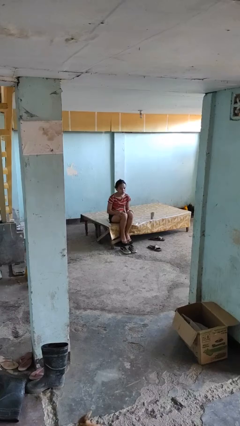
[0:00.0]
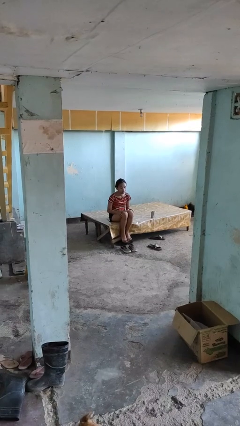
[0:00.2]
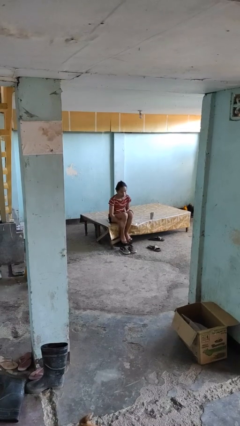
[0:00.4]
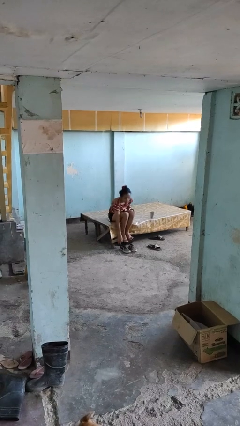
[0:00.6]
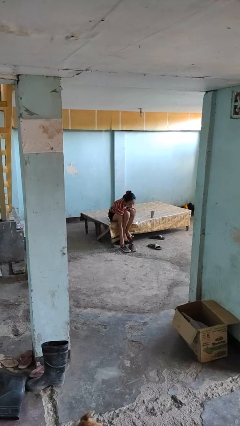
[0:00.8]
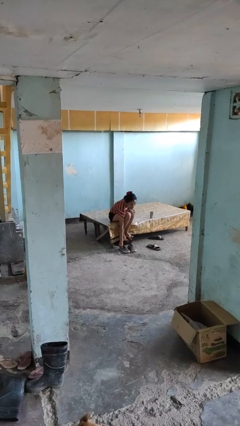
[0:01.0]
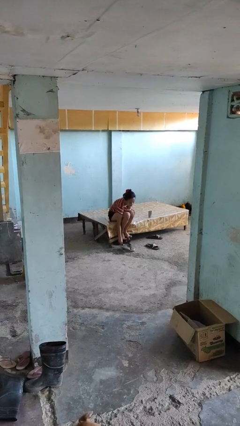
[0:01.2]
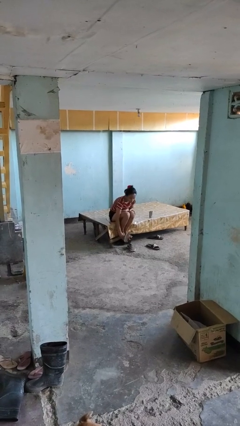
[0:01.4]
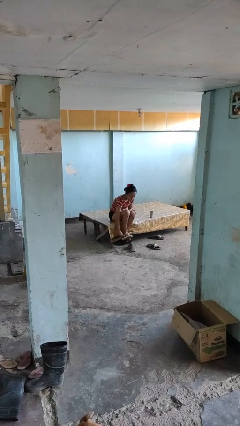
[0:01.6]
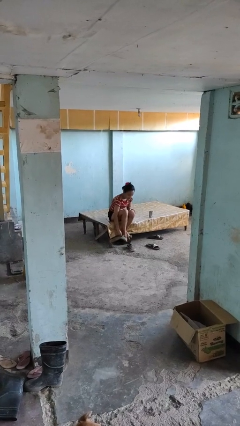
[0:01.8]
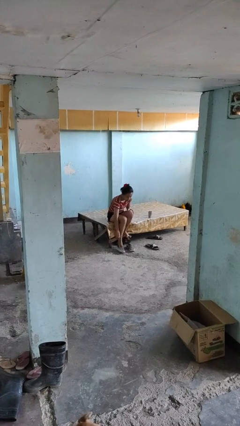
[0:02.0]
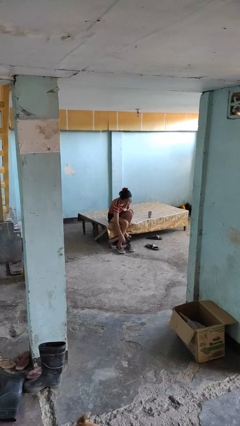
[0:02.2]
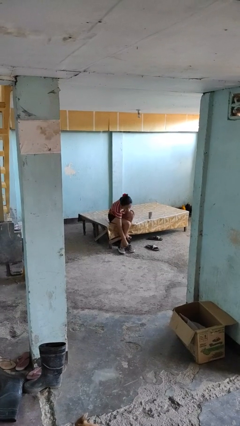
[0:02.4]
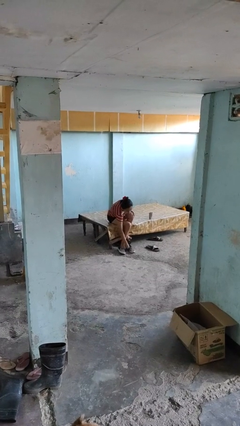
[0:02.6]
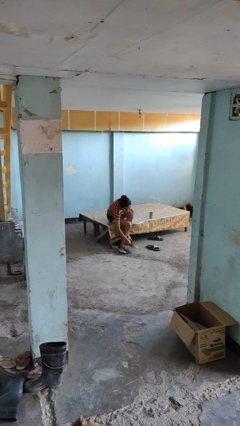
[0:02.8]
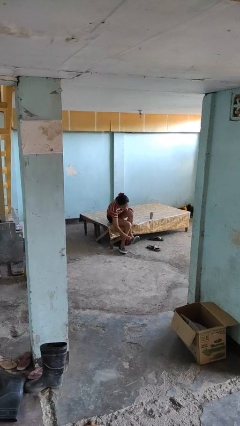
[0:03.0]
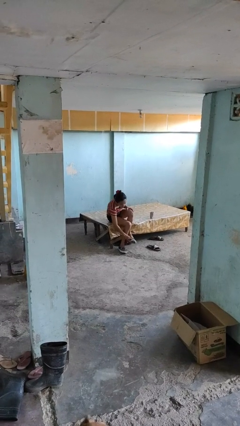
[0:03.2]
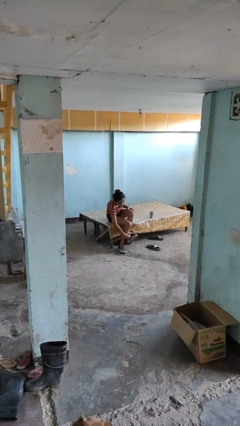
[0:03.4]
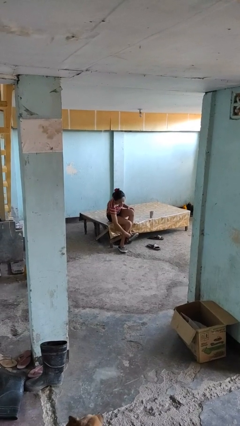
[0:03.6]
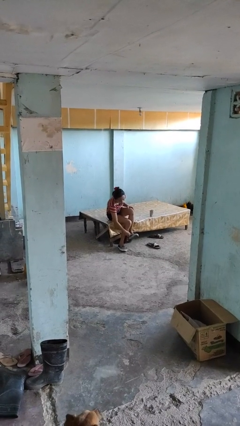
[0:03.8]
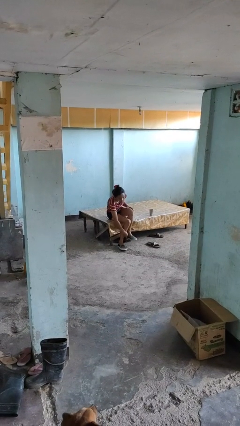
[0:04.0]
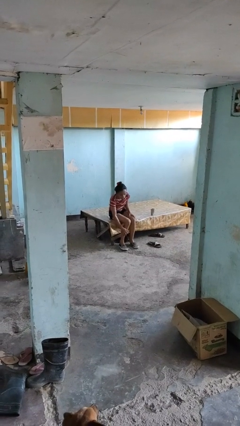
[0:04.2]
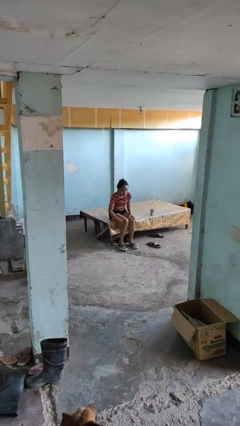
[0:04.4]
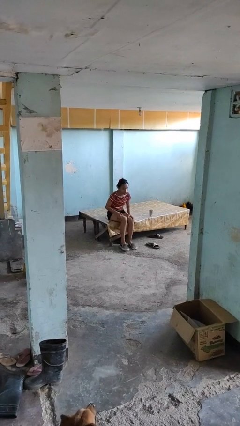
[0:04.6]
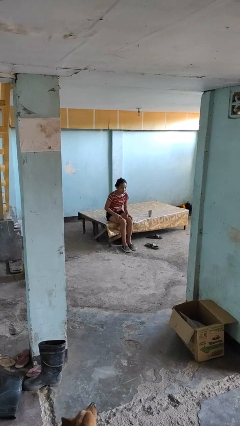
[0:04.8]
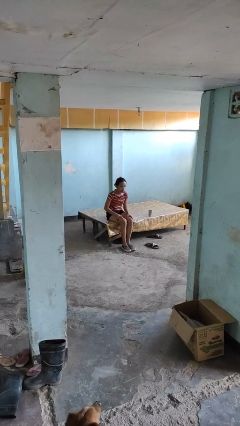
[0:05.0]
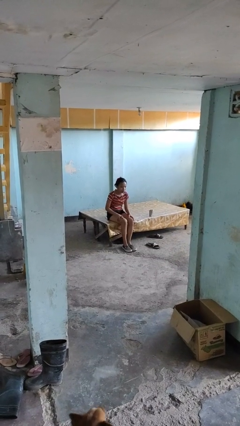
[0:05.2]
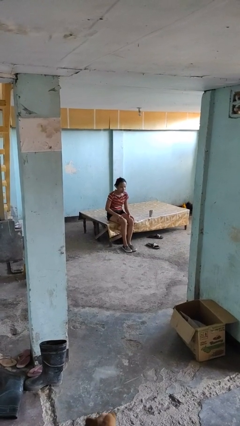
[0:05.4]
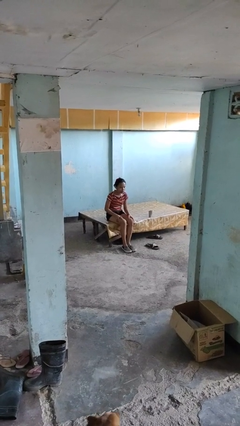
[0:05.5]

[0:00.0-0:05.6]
person puts on shoes

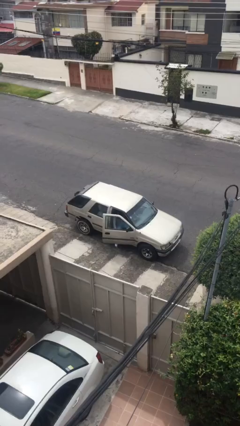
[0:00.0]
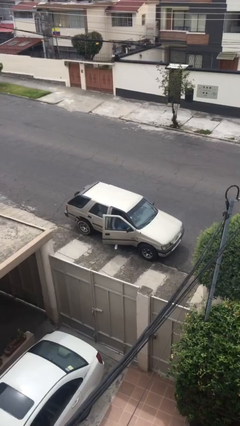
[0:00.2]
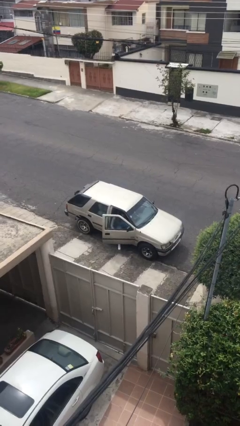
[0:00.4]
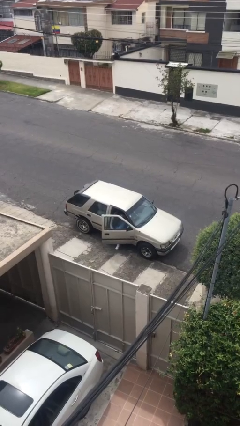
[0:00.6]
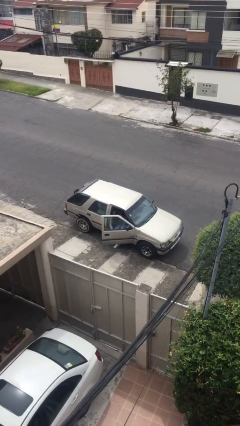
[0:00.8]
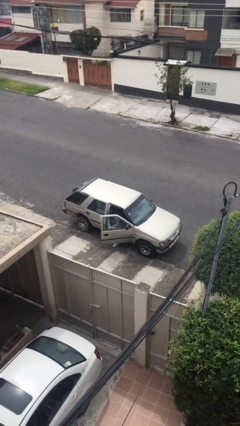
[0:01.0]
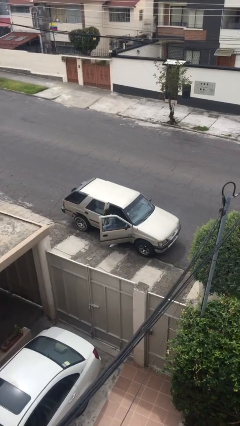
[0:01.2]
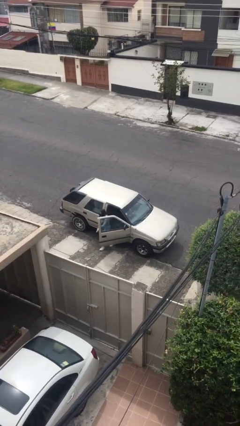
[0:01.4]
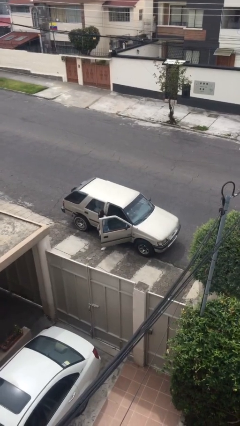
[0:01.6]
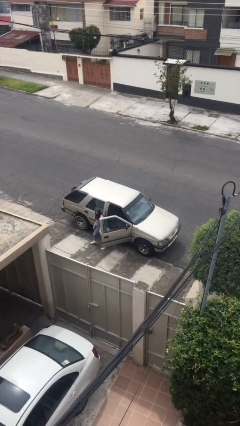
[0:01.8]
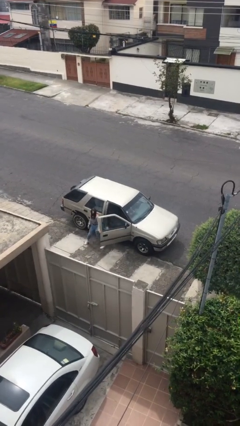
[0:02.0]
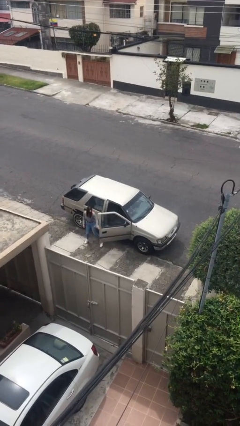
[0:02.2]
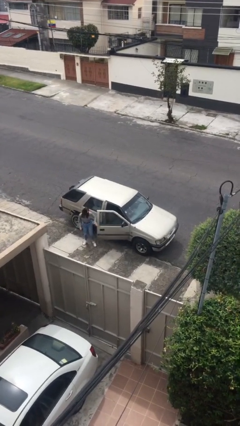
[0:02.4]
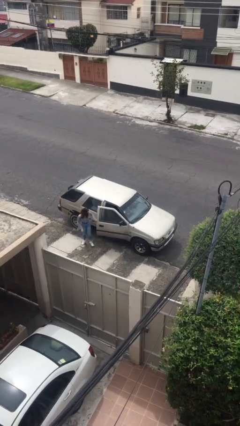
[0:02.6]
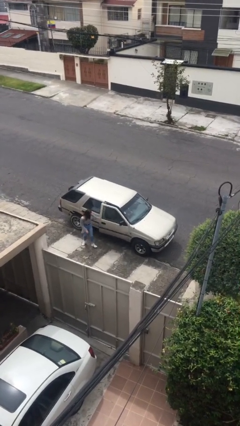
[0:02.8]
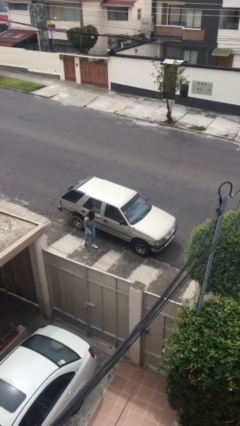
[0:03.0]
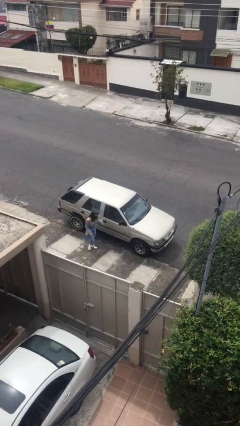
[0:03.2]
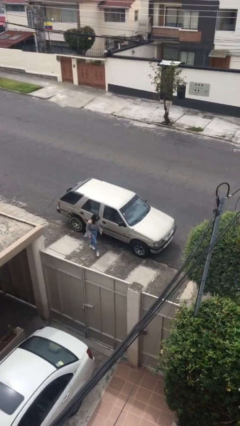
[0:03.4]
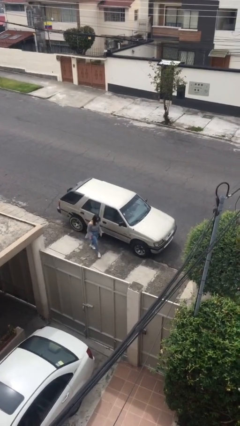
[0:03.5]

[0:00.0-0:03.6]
car drops off person

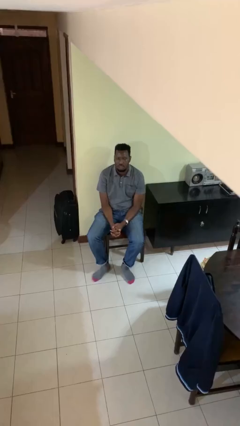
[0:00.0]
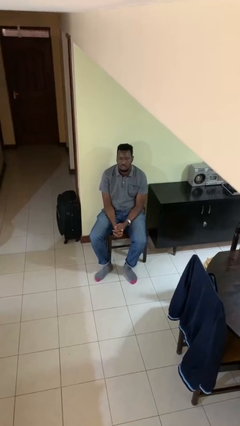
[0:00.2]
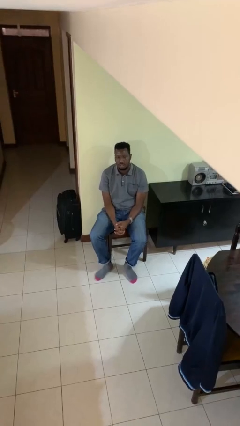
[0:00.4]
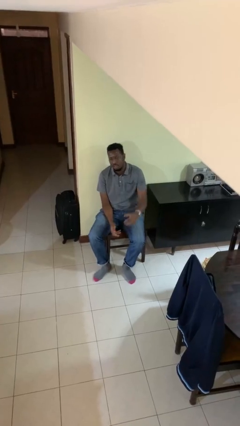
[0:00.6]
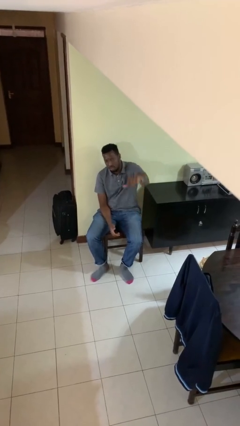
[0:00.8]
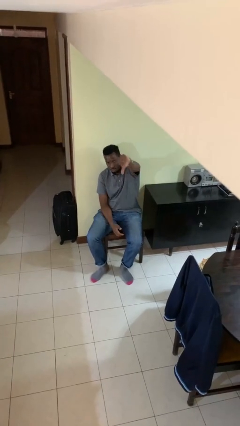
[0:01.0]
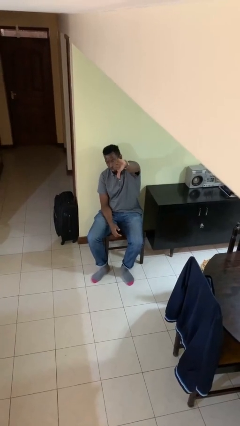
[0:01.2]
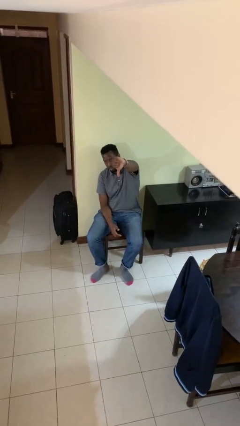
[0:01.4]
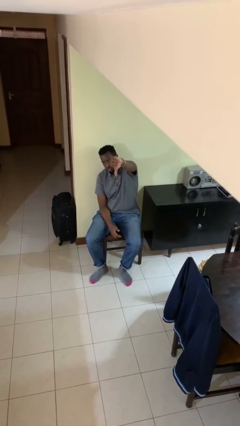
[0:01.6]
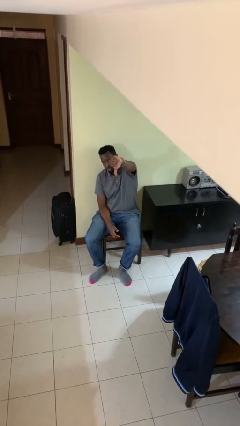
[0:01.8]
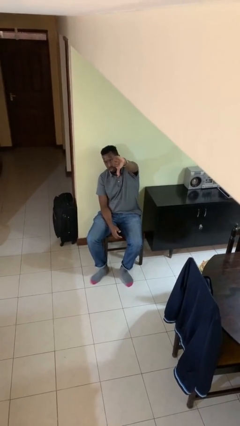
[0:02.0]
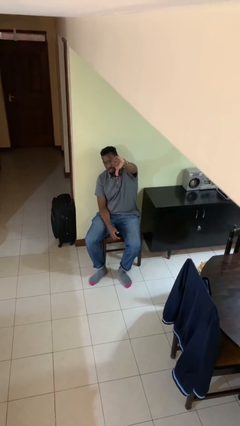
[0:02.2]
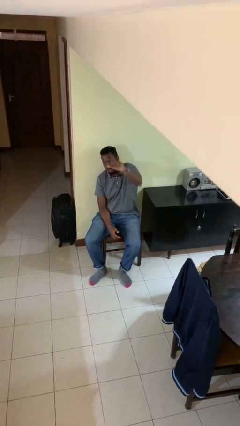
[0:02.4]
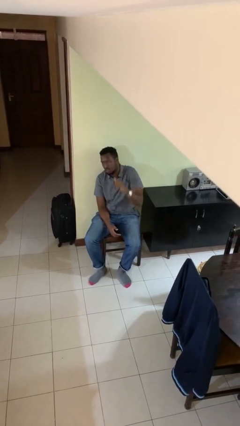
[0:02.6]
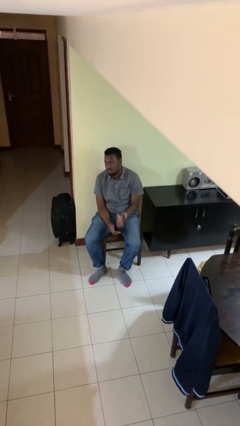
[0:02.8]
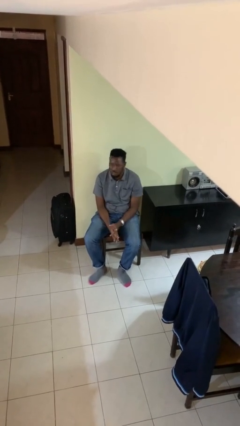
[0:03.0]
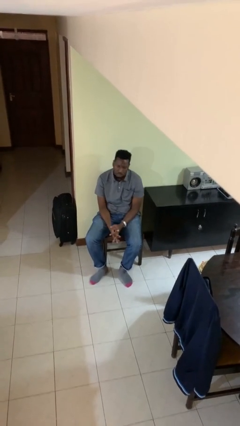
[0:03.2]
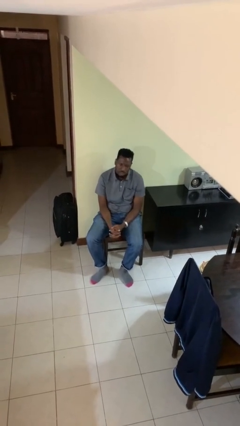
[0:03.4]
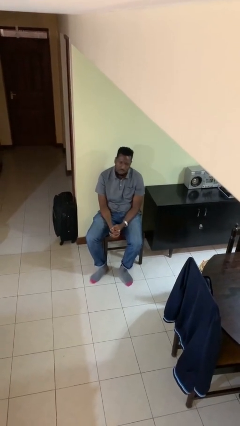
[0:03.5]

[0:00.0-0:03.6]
person gestures thumbs down

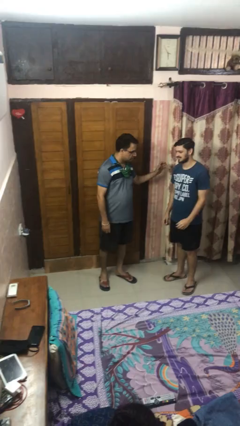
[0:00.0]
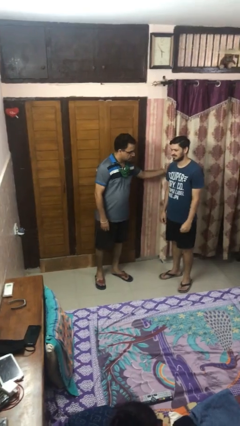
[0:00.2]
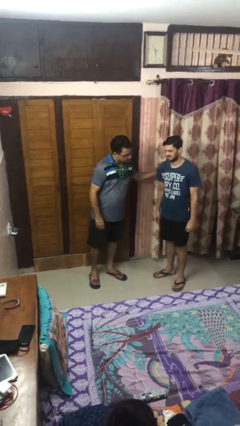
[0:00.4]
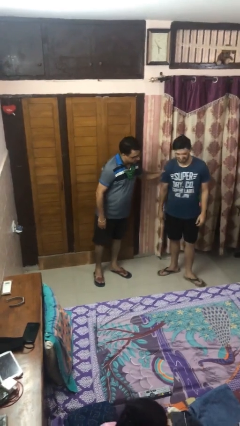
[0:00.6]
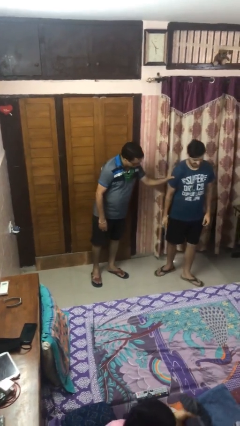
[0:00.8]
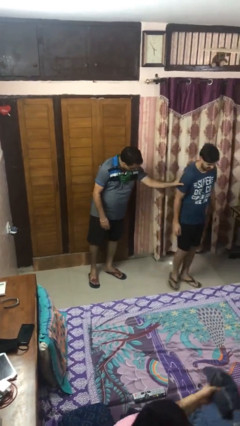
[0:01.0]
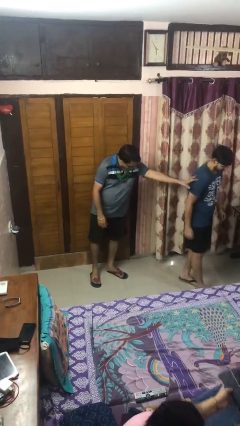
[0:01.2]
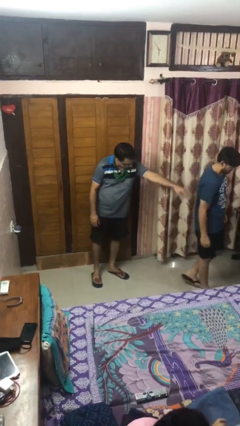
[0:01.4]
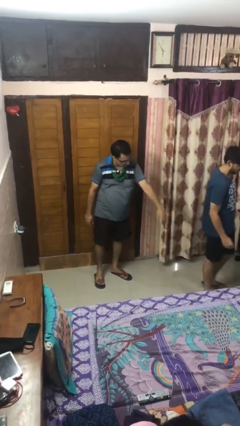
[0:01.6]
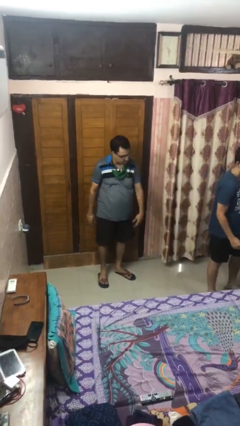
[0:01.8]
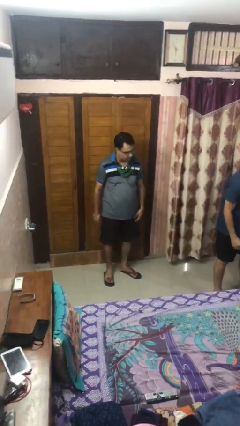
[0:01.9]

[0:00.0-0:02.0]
person shoves person

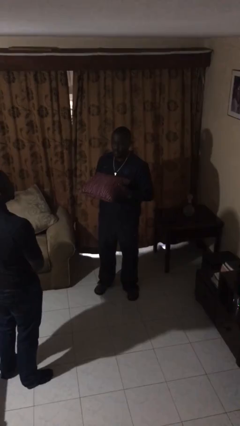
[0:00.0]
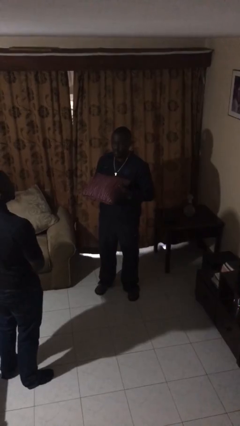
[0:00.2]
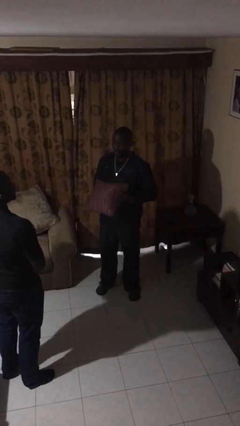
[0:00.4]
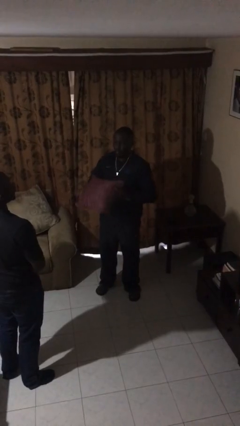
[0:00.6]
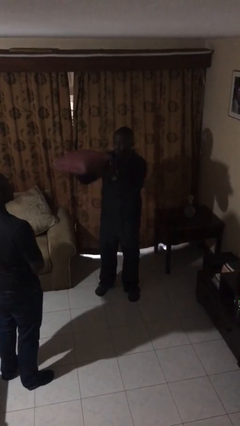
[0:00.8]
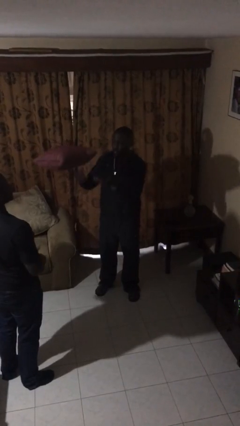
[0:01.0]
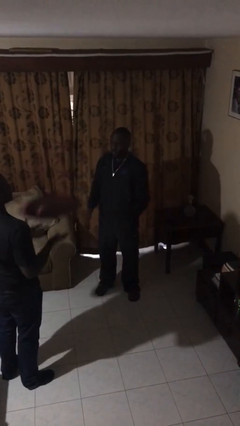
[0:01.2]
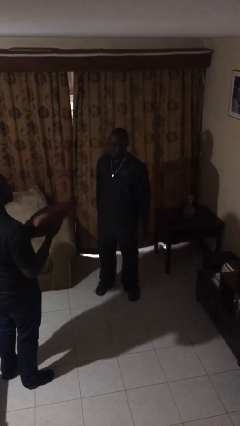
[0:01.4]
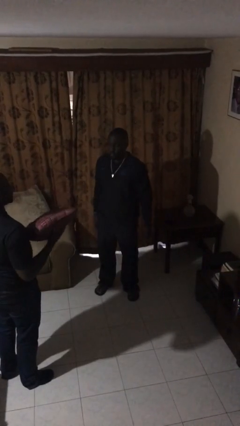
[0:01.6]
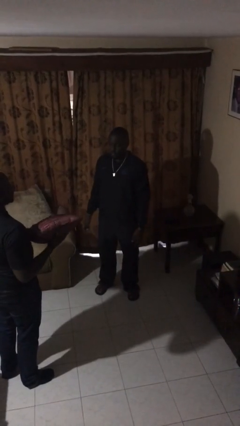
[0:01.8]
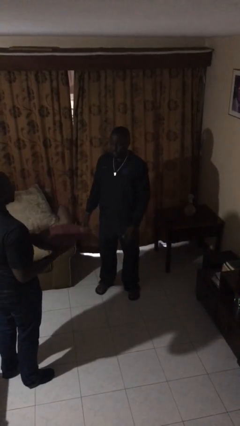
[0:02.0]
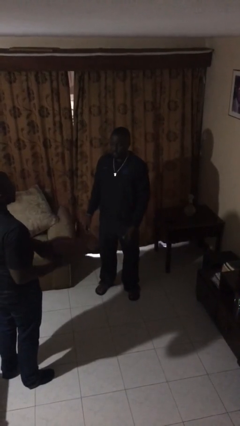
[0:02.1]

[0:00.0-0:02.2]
person throws object to person

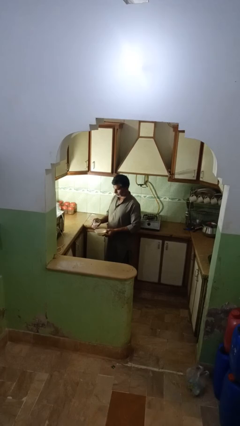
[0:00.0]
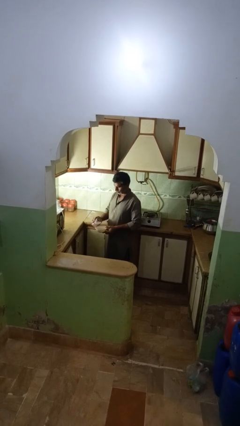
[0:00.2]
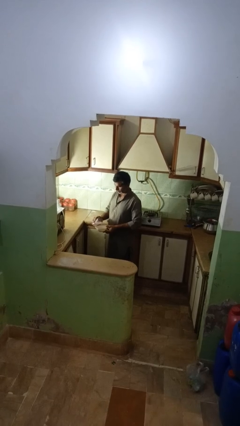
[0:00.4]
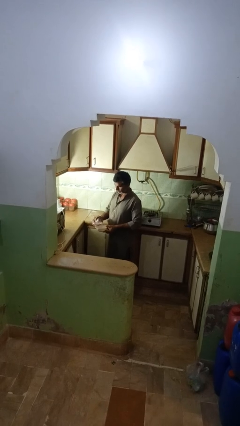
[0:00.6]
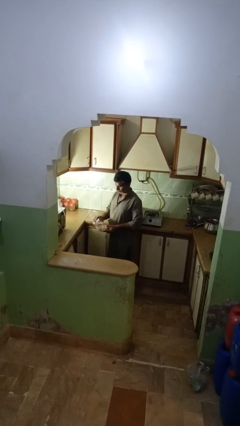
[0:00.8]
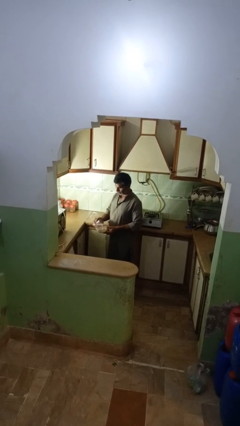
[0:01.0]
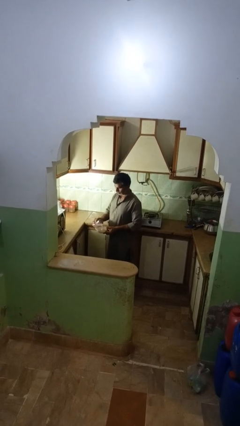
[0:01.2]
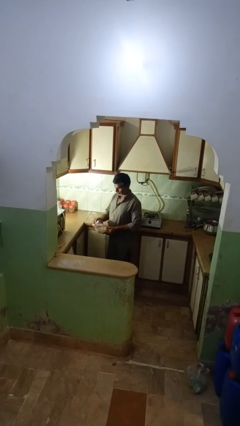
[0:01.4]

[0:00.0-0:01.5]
person pours into bowl
